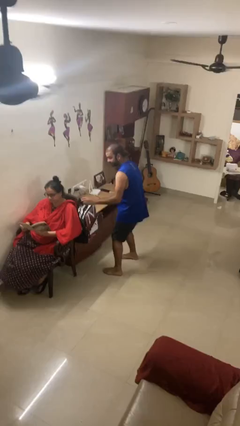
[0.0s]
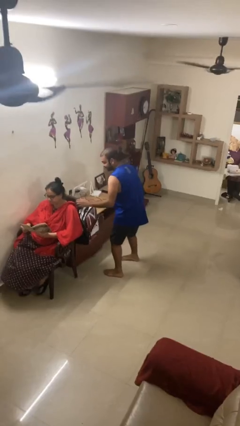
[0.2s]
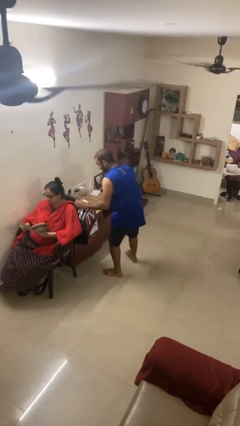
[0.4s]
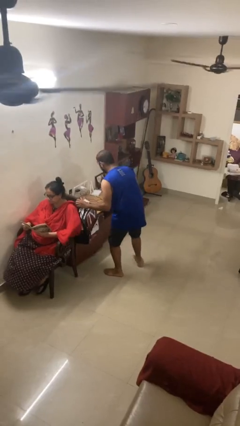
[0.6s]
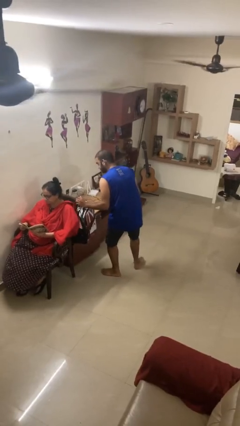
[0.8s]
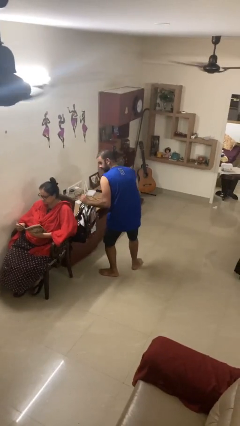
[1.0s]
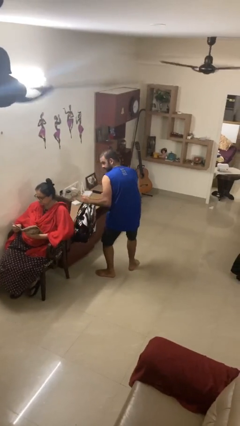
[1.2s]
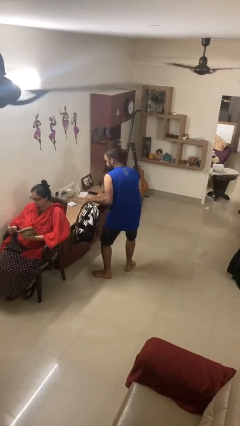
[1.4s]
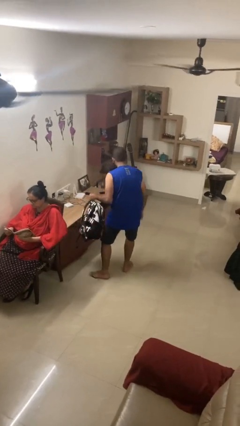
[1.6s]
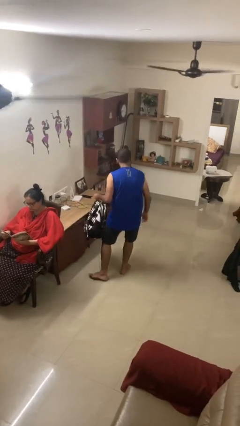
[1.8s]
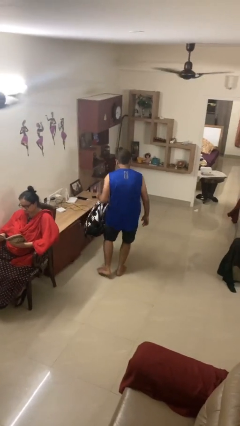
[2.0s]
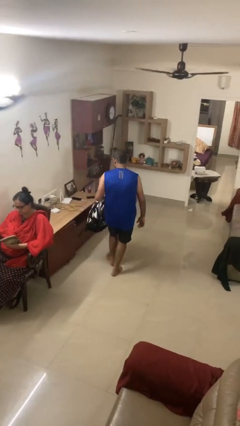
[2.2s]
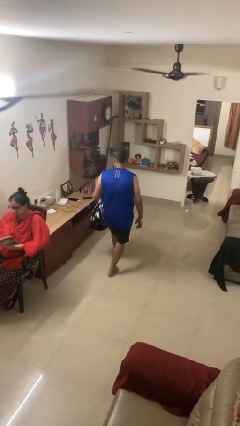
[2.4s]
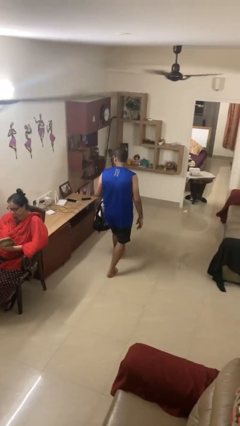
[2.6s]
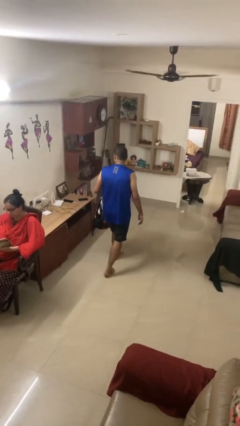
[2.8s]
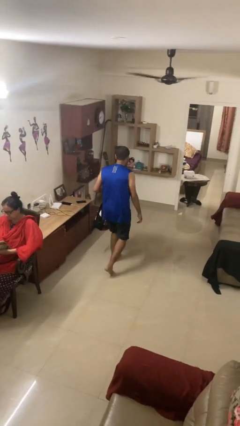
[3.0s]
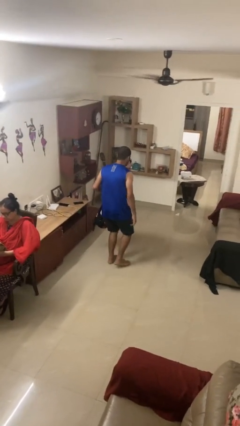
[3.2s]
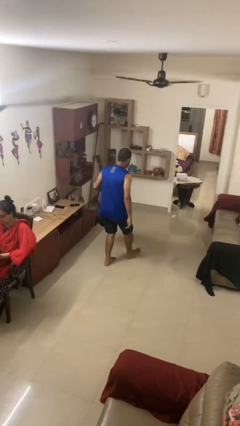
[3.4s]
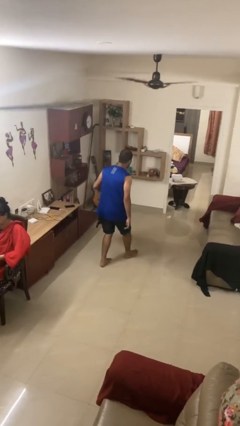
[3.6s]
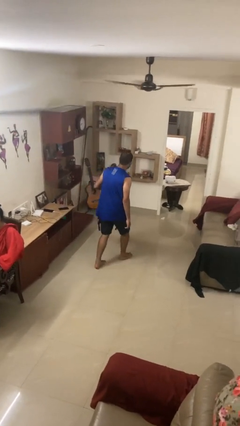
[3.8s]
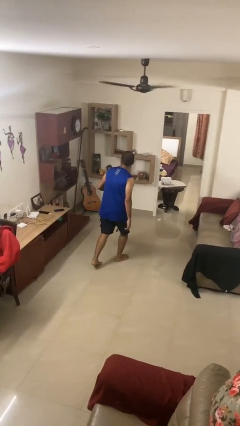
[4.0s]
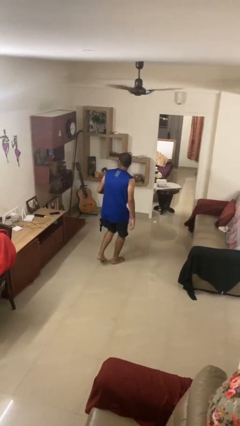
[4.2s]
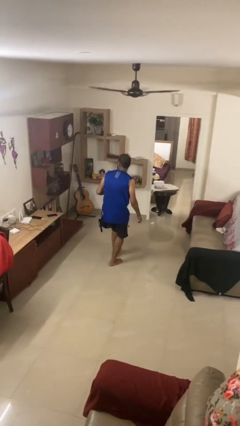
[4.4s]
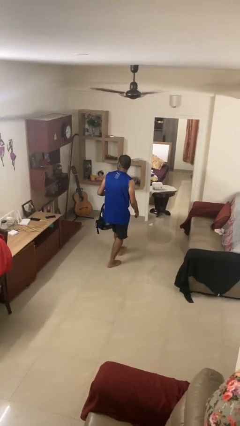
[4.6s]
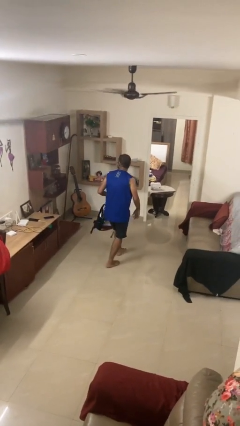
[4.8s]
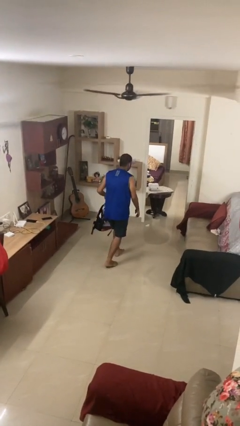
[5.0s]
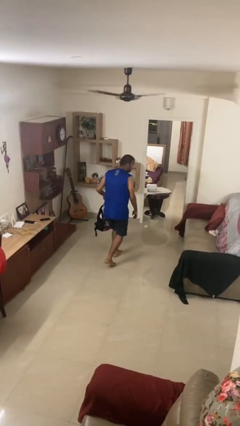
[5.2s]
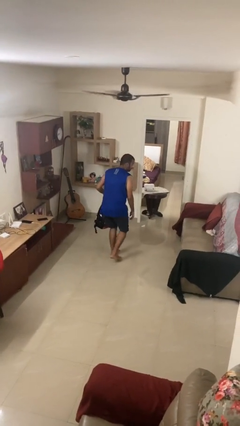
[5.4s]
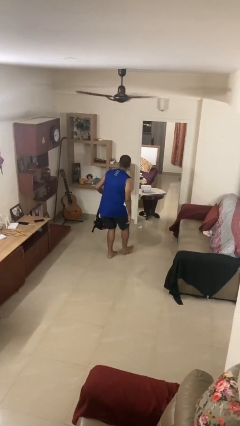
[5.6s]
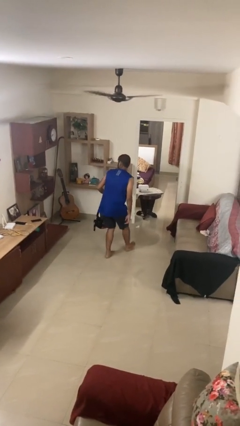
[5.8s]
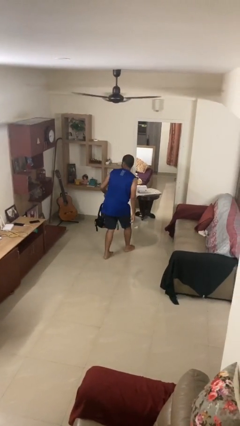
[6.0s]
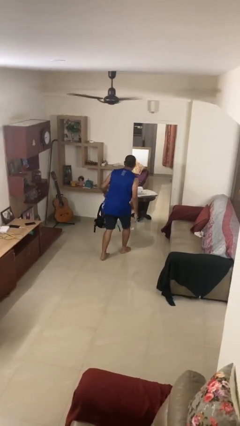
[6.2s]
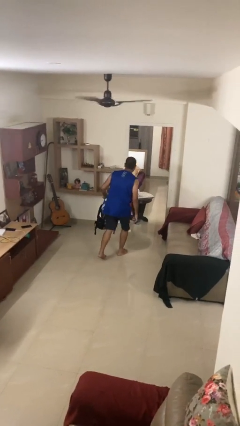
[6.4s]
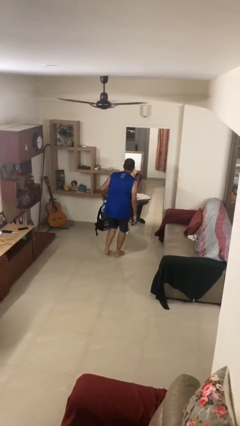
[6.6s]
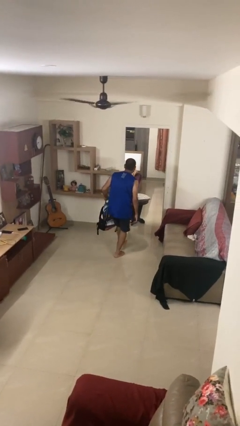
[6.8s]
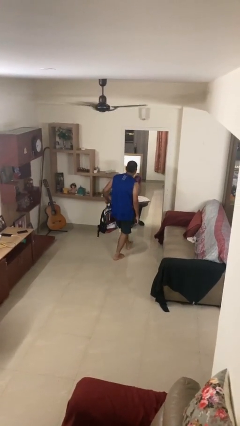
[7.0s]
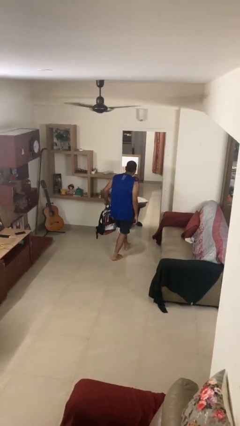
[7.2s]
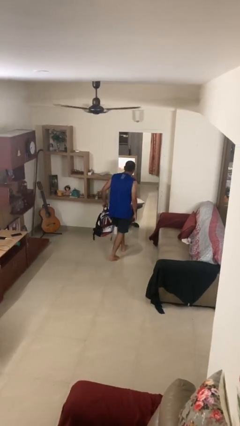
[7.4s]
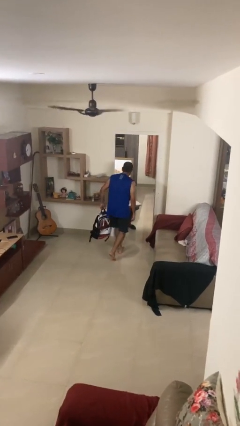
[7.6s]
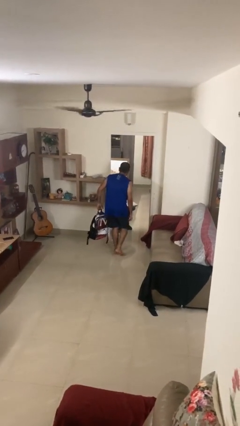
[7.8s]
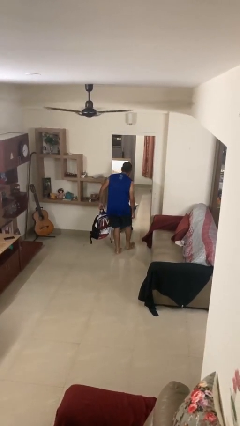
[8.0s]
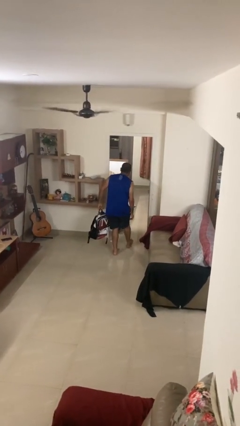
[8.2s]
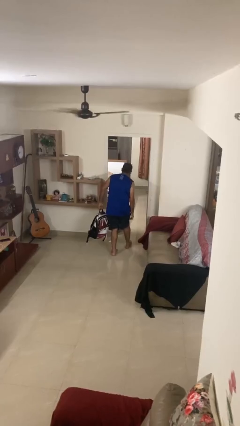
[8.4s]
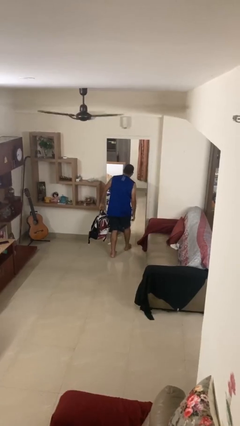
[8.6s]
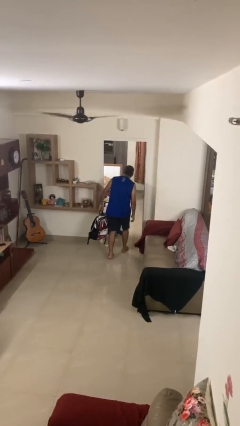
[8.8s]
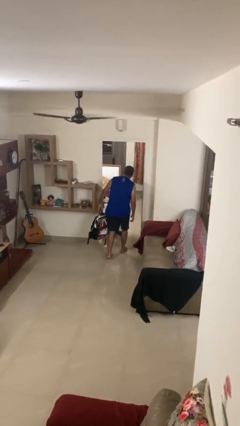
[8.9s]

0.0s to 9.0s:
person steals object from person

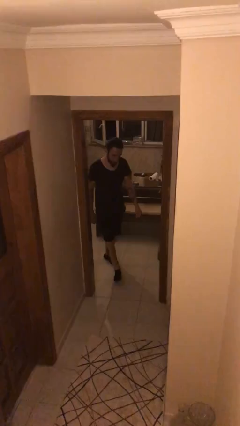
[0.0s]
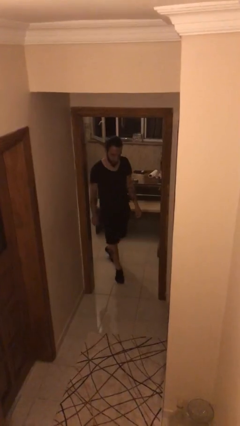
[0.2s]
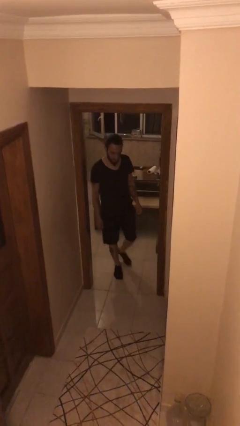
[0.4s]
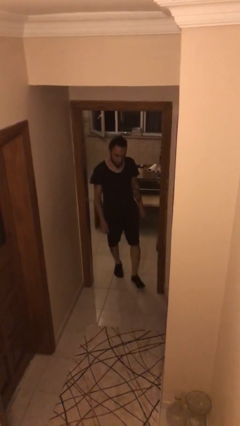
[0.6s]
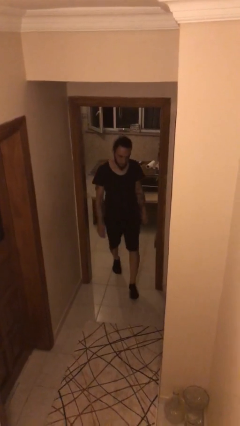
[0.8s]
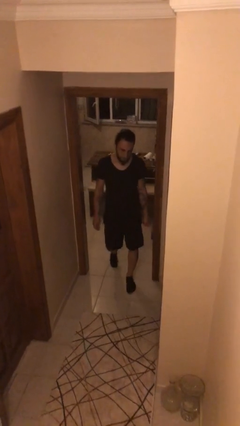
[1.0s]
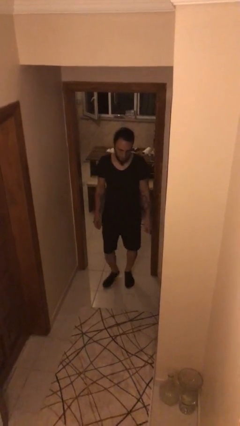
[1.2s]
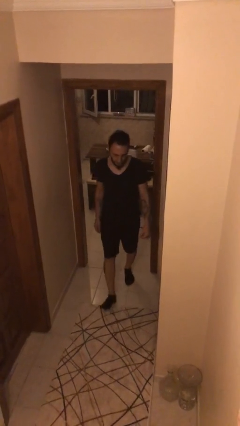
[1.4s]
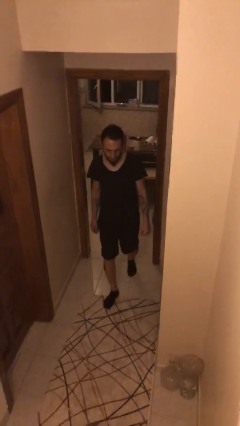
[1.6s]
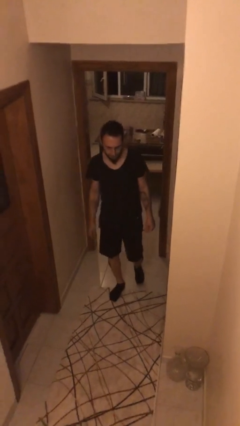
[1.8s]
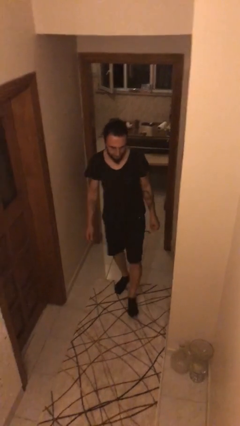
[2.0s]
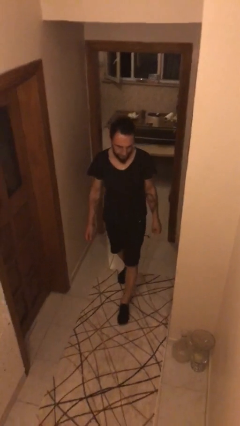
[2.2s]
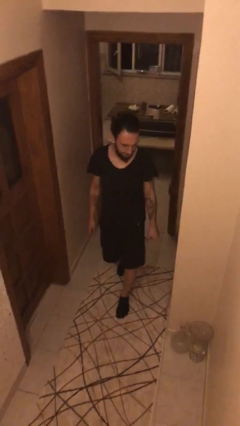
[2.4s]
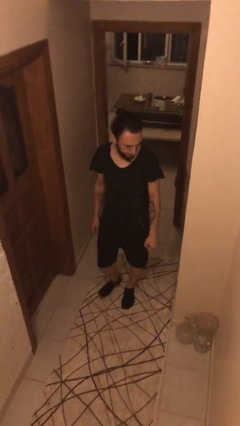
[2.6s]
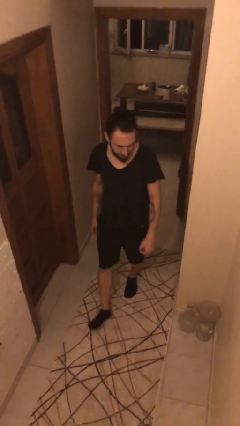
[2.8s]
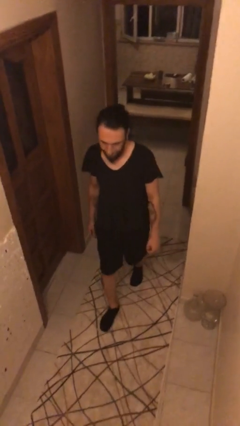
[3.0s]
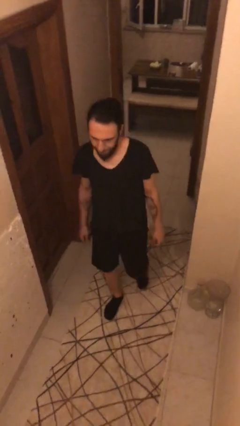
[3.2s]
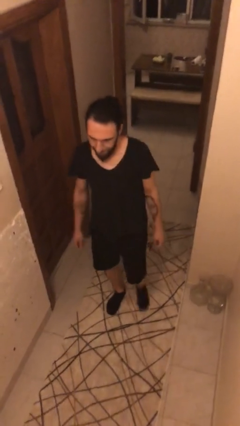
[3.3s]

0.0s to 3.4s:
person enters scene through structure

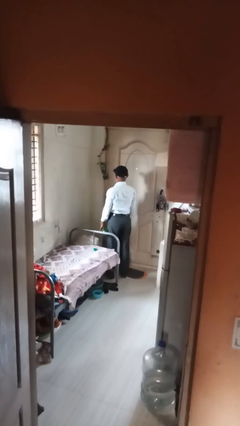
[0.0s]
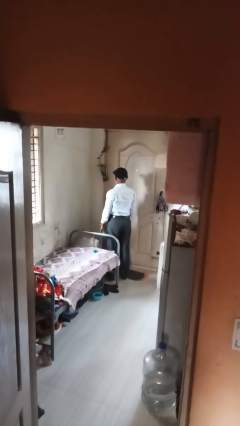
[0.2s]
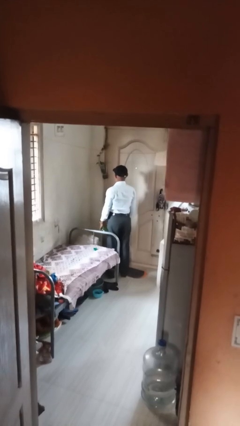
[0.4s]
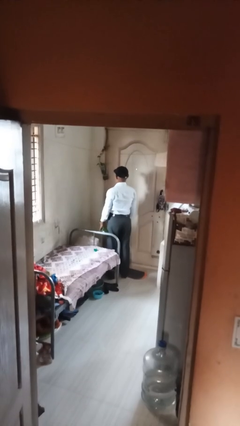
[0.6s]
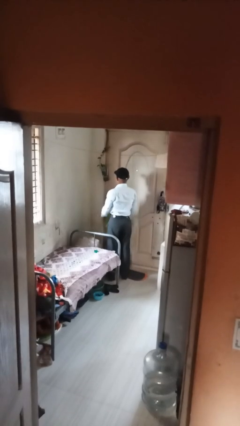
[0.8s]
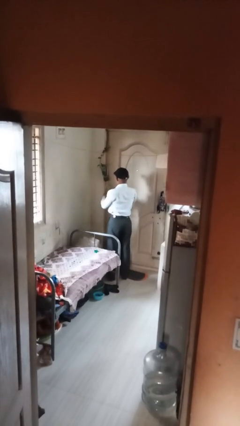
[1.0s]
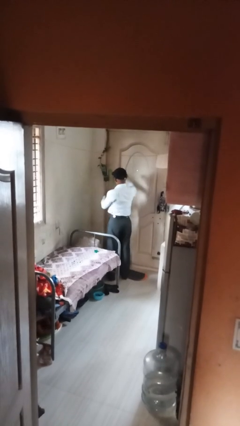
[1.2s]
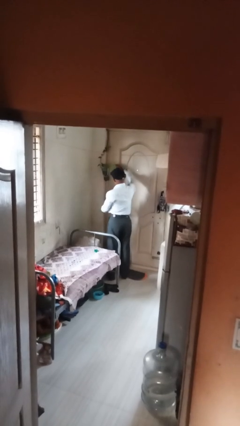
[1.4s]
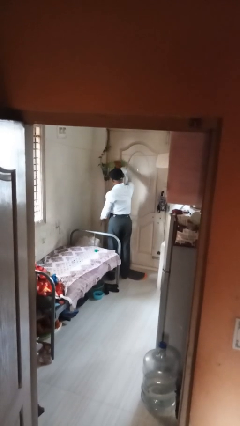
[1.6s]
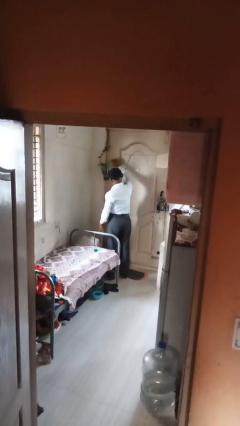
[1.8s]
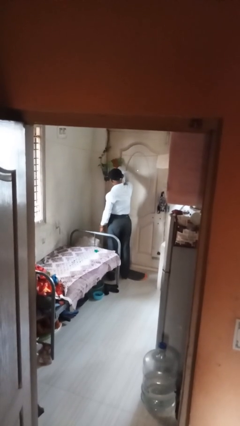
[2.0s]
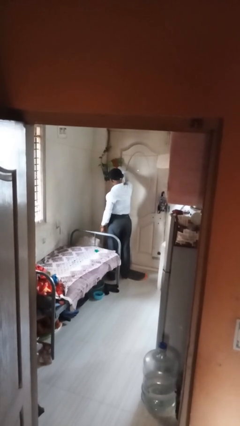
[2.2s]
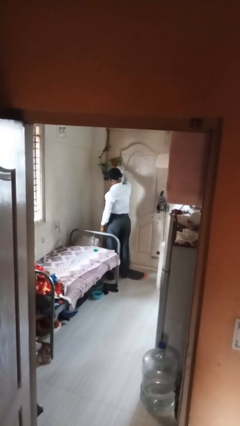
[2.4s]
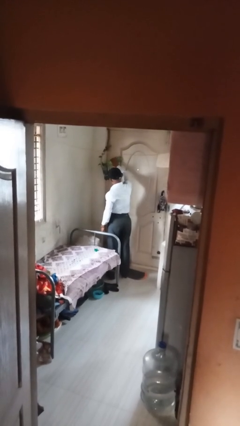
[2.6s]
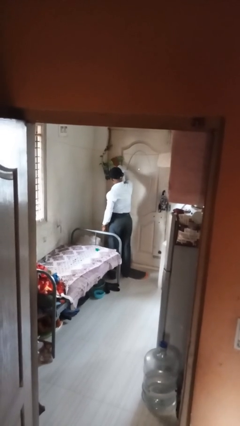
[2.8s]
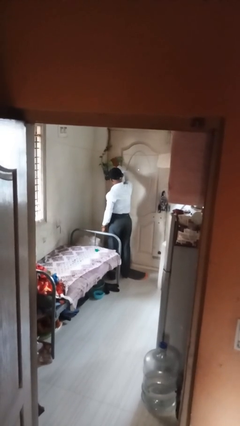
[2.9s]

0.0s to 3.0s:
person waters houseplant

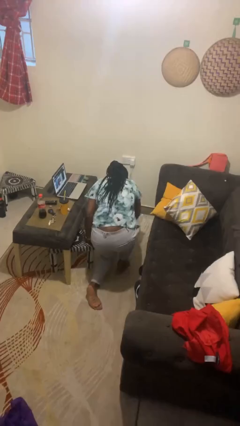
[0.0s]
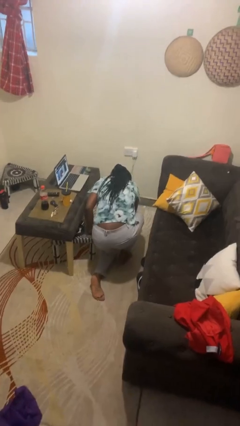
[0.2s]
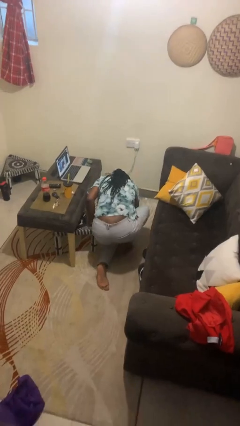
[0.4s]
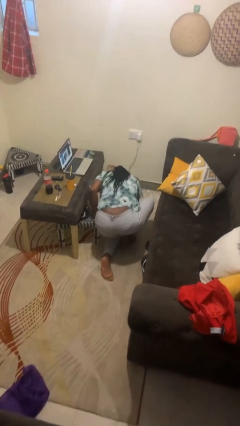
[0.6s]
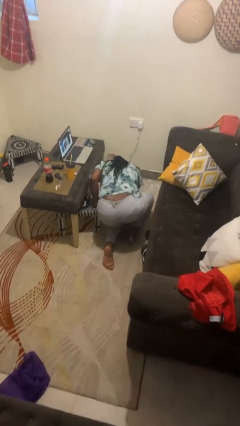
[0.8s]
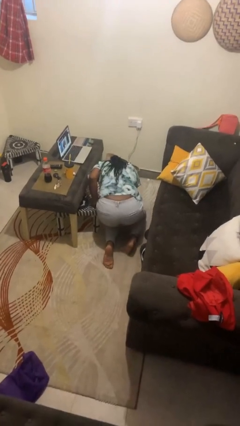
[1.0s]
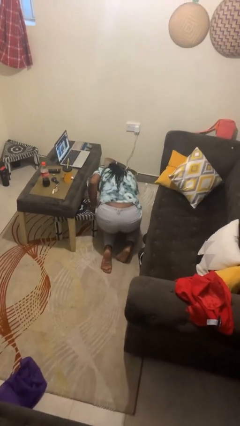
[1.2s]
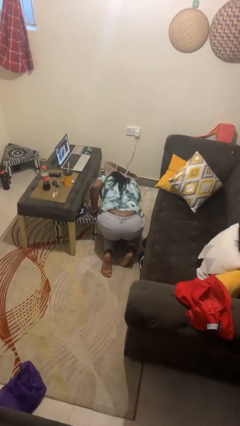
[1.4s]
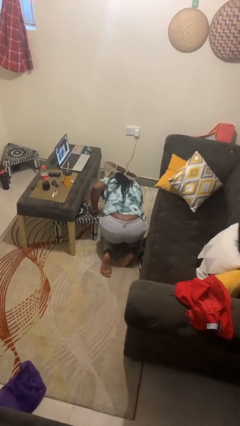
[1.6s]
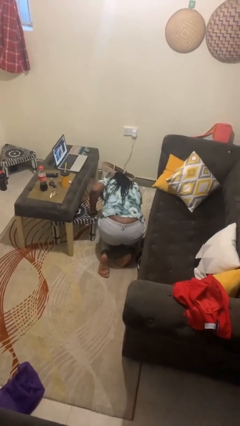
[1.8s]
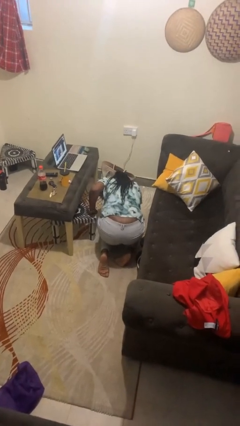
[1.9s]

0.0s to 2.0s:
person lies down on floor

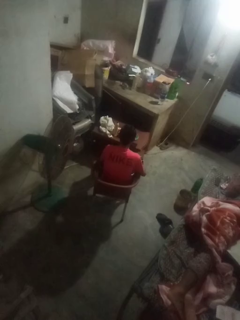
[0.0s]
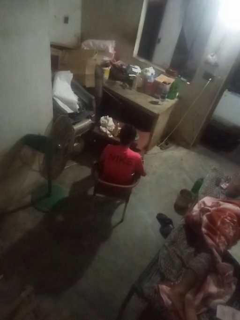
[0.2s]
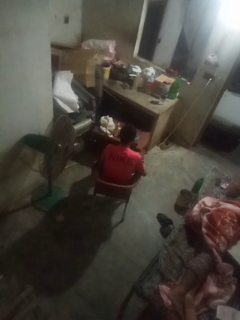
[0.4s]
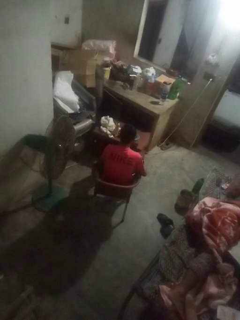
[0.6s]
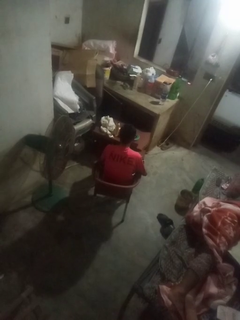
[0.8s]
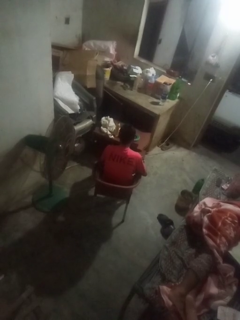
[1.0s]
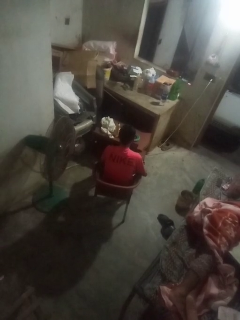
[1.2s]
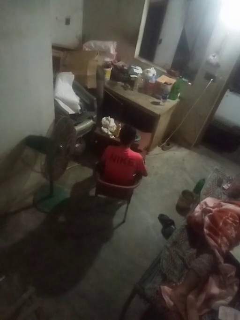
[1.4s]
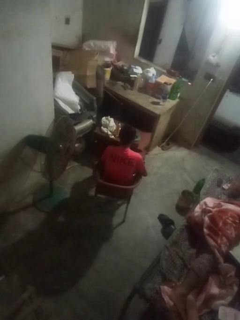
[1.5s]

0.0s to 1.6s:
person yawns
